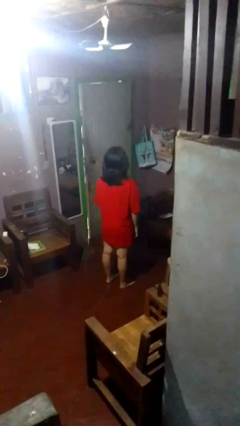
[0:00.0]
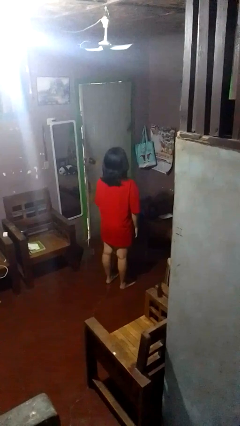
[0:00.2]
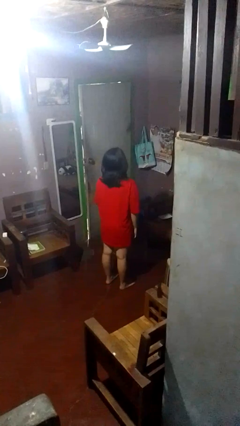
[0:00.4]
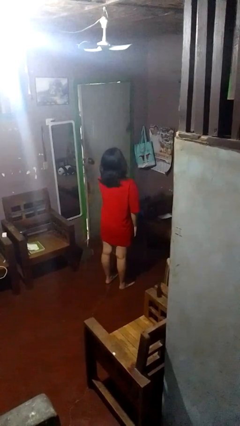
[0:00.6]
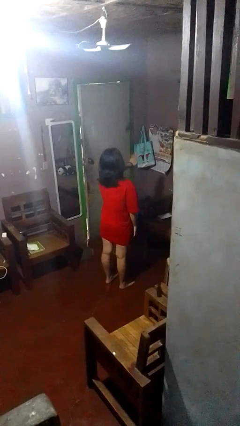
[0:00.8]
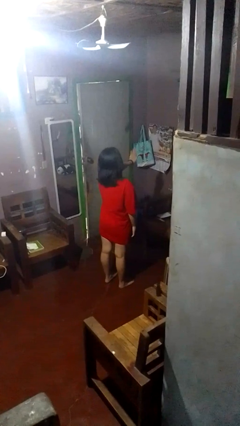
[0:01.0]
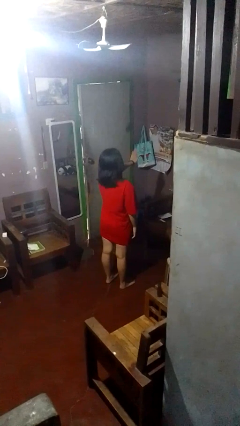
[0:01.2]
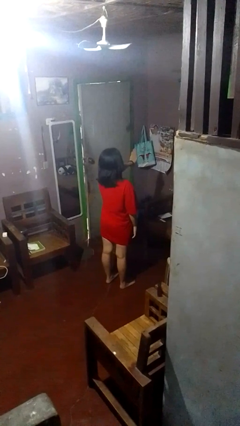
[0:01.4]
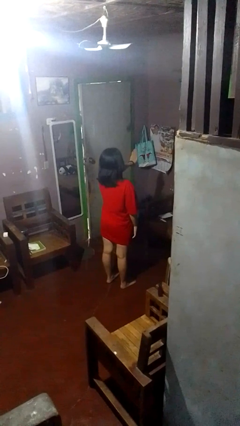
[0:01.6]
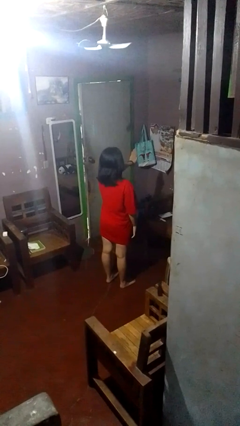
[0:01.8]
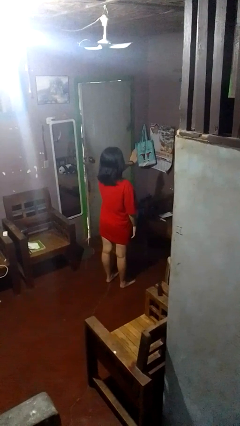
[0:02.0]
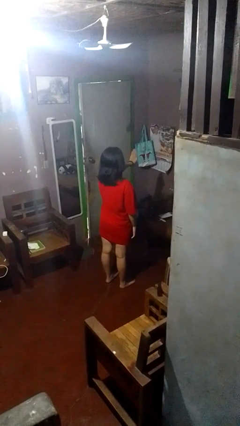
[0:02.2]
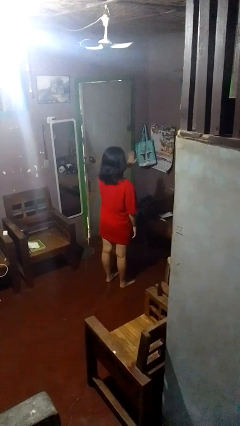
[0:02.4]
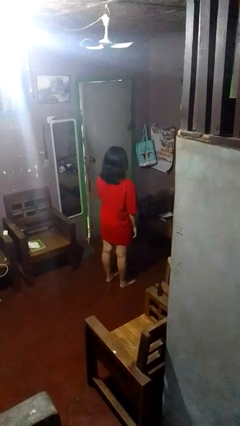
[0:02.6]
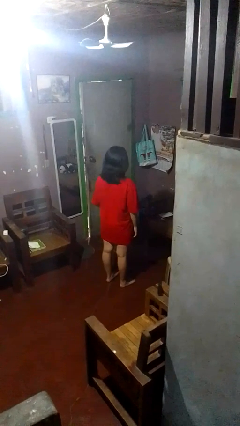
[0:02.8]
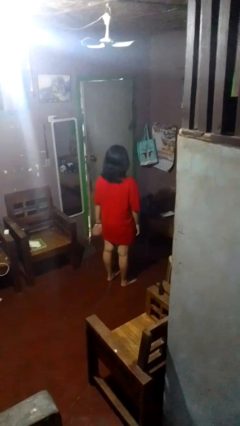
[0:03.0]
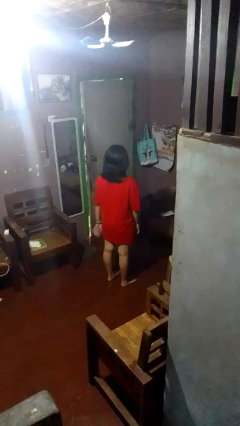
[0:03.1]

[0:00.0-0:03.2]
person gestures stop

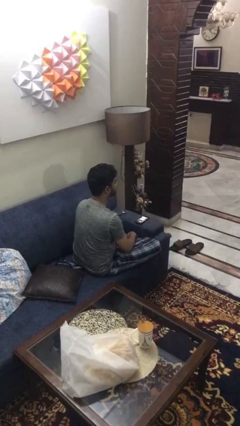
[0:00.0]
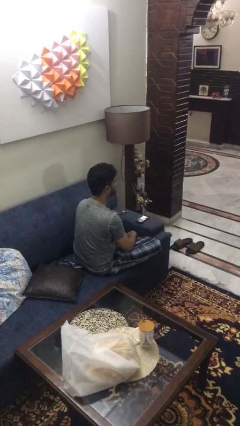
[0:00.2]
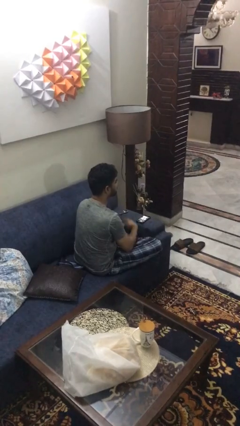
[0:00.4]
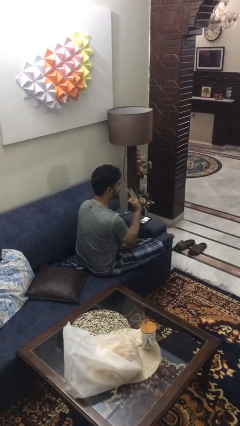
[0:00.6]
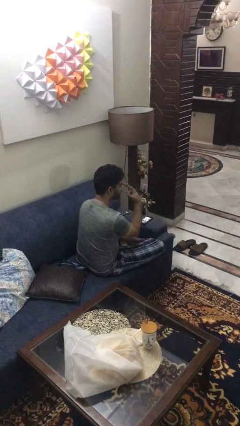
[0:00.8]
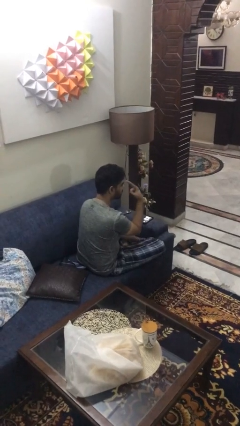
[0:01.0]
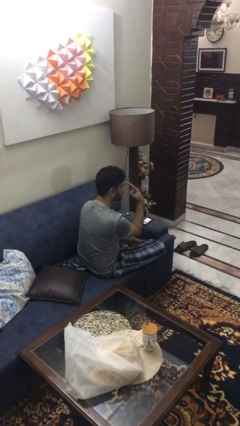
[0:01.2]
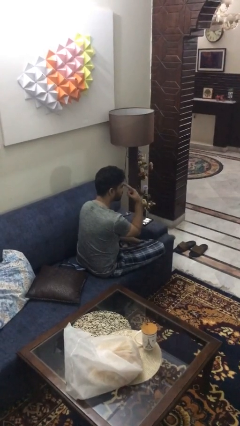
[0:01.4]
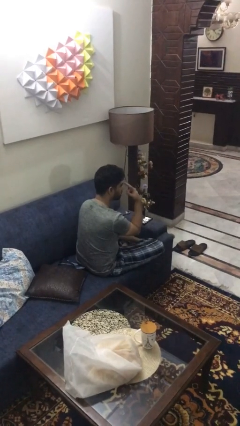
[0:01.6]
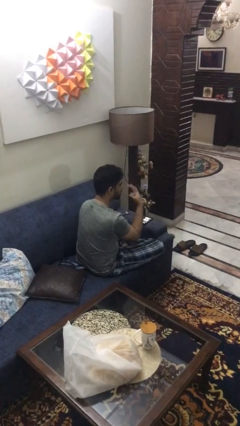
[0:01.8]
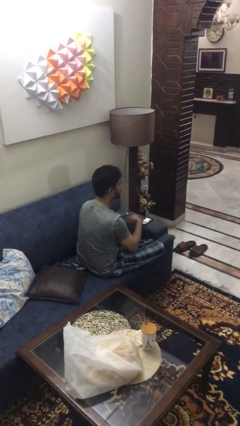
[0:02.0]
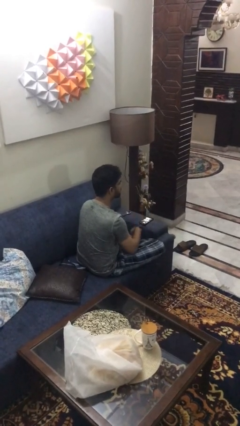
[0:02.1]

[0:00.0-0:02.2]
person gestures watch closely

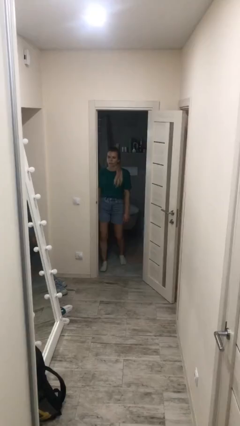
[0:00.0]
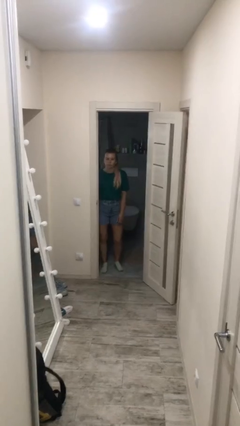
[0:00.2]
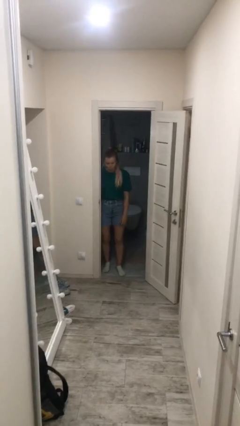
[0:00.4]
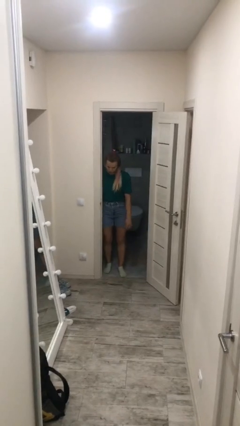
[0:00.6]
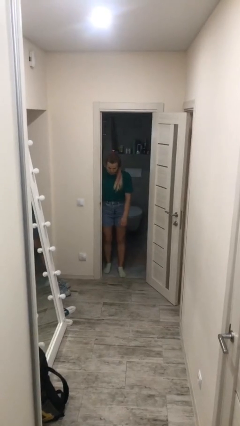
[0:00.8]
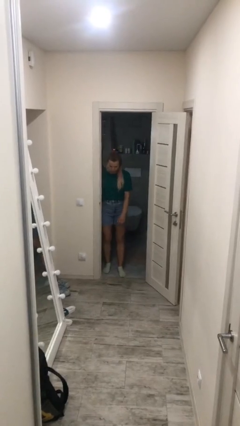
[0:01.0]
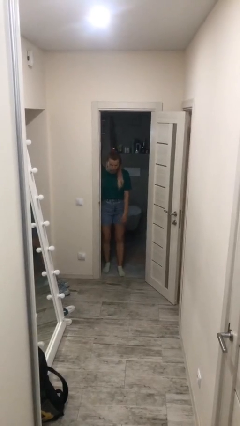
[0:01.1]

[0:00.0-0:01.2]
person bumps into wall

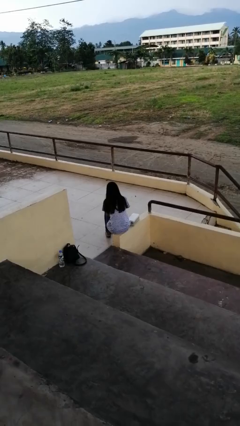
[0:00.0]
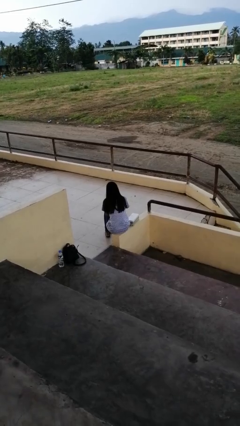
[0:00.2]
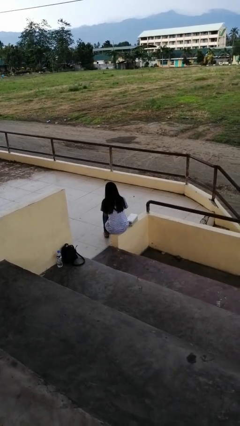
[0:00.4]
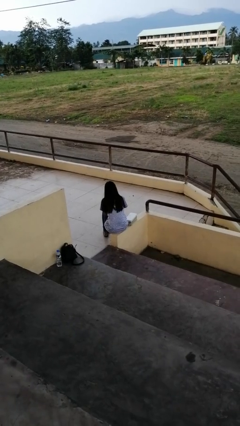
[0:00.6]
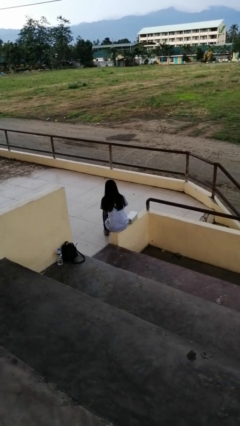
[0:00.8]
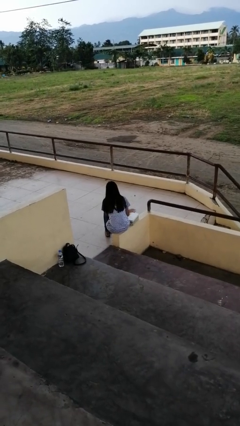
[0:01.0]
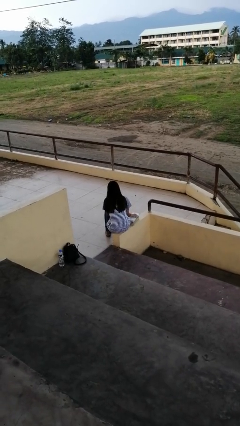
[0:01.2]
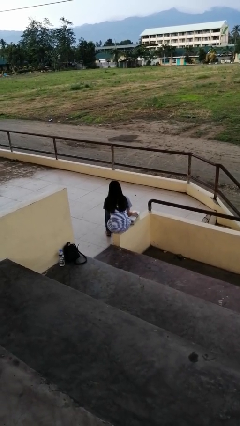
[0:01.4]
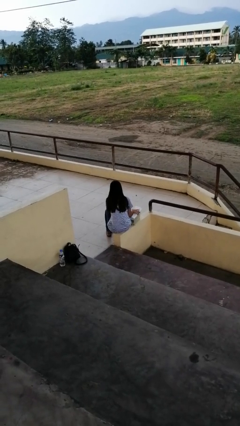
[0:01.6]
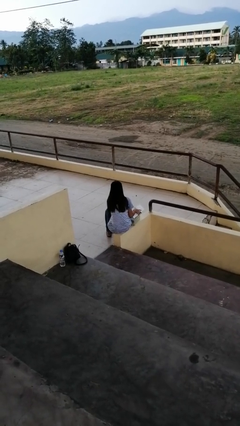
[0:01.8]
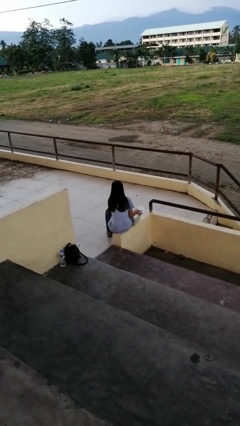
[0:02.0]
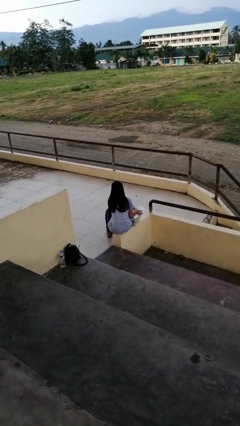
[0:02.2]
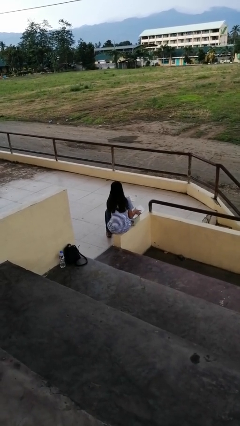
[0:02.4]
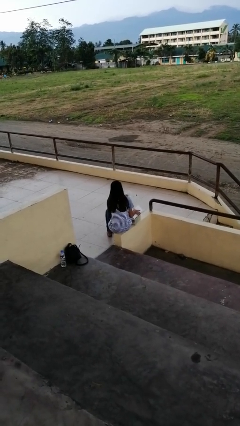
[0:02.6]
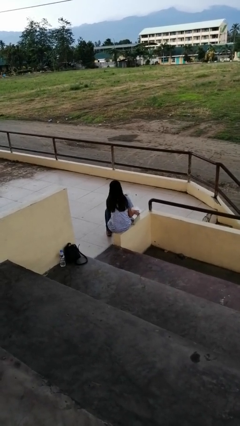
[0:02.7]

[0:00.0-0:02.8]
person takes object from box

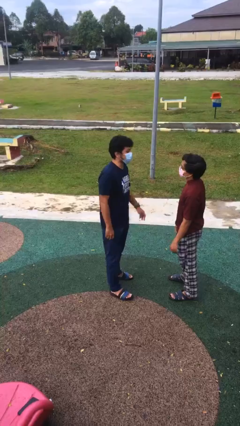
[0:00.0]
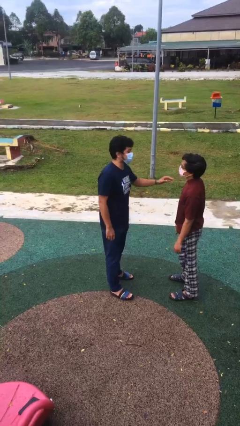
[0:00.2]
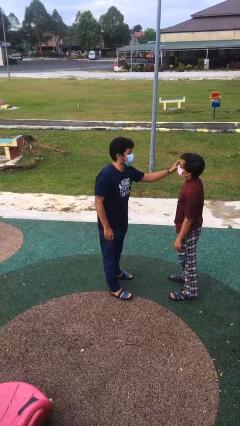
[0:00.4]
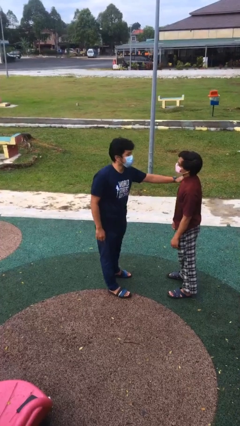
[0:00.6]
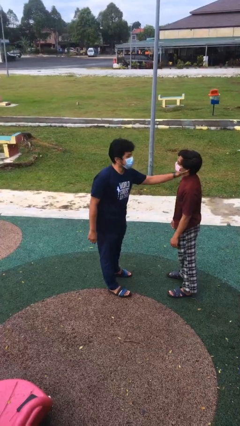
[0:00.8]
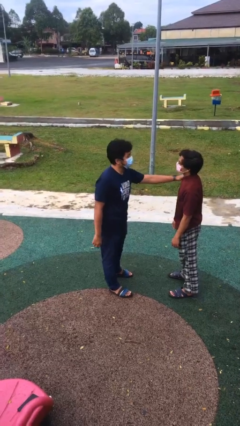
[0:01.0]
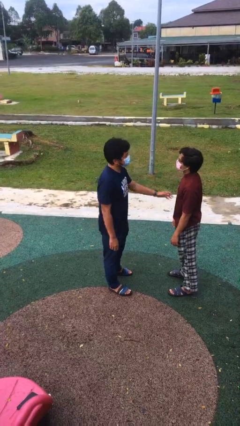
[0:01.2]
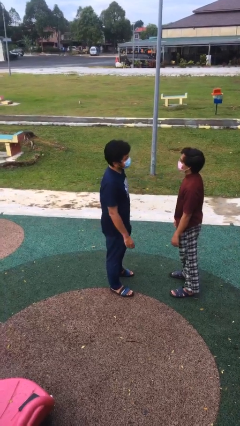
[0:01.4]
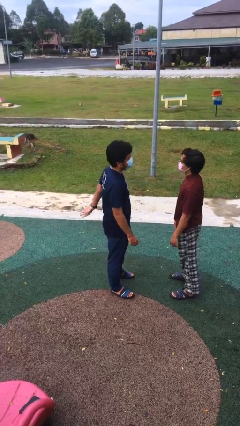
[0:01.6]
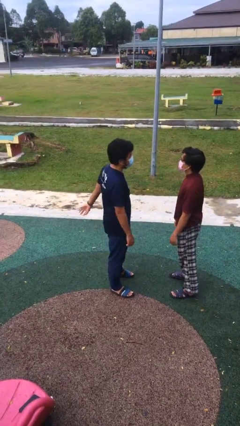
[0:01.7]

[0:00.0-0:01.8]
person pounds shoulders of person

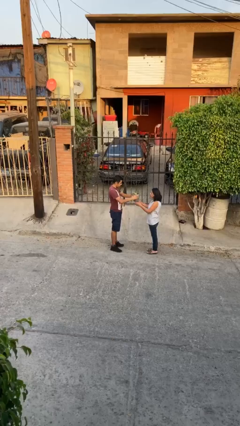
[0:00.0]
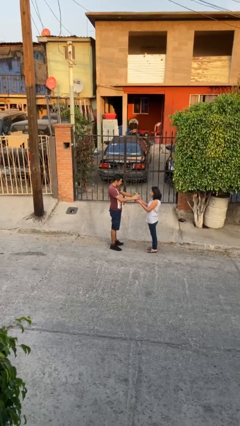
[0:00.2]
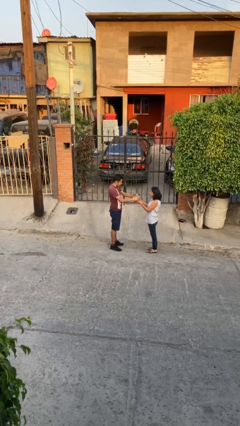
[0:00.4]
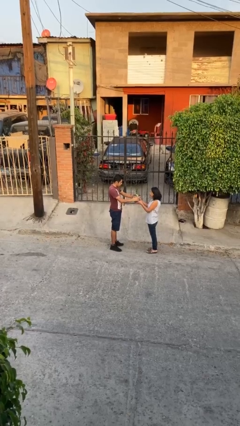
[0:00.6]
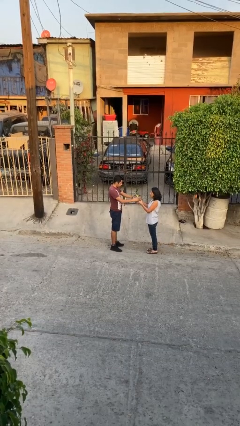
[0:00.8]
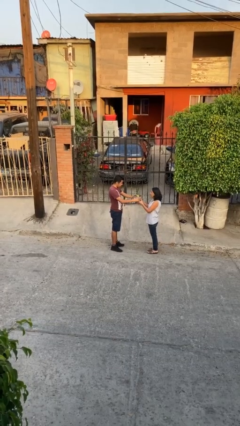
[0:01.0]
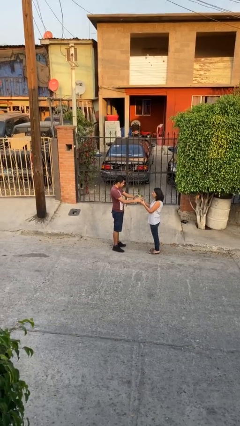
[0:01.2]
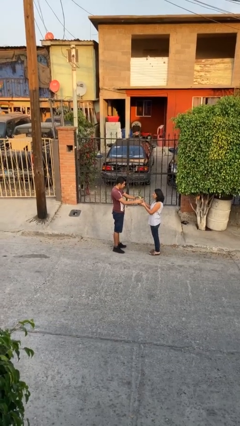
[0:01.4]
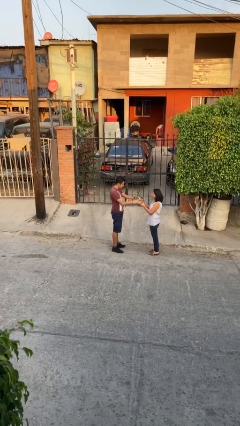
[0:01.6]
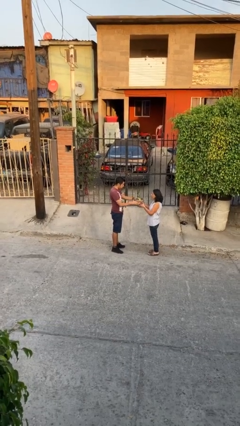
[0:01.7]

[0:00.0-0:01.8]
person transfers object to person

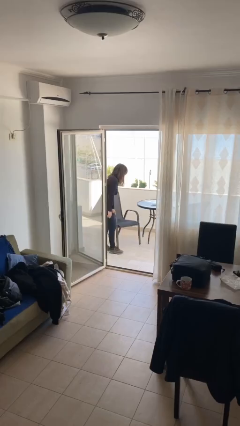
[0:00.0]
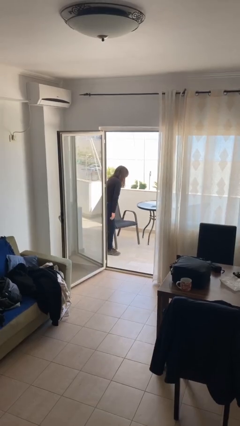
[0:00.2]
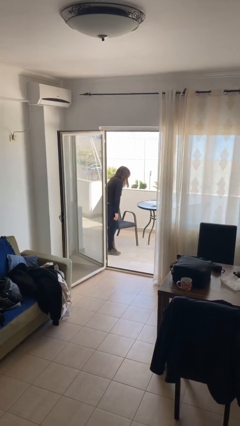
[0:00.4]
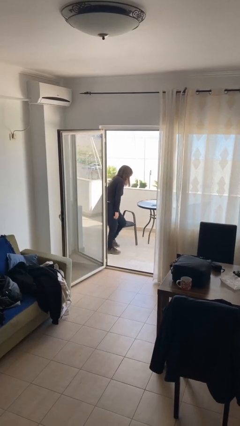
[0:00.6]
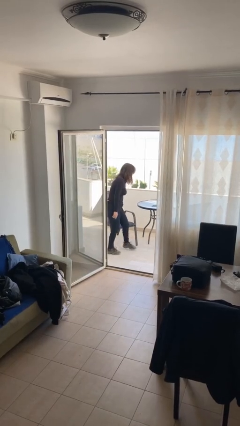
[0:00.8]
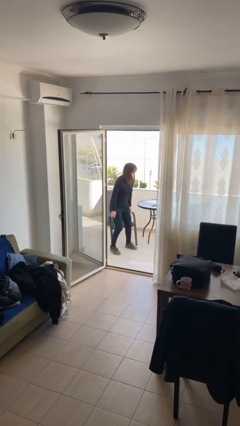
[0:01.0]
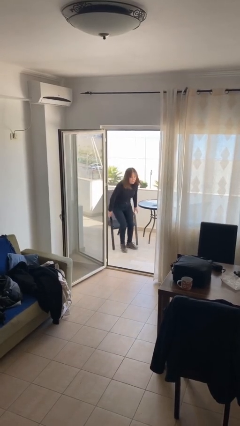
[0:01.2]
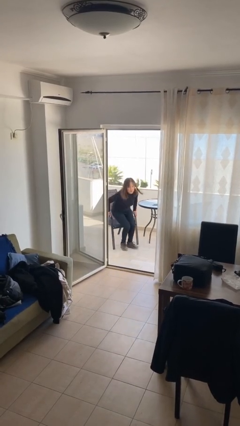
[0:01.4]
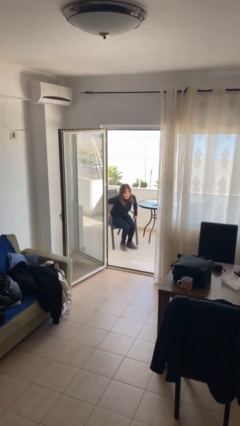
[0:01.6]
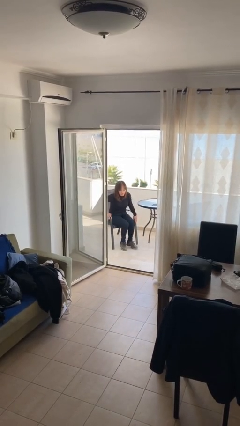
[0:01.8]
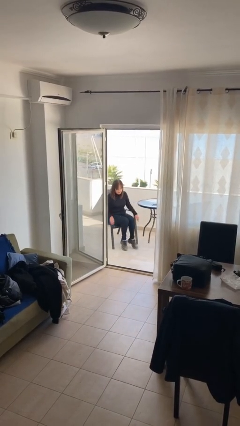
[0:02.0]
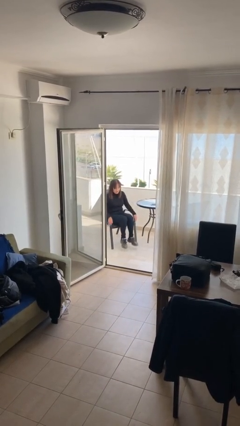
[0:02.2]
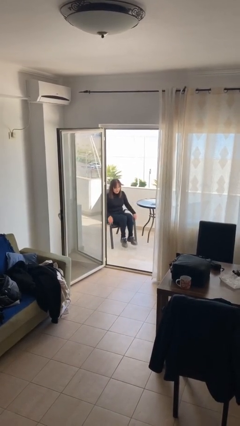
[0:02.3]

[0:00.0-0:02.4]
person sits down

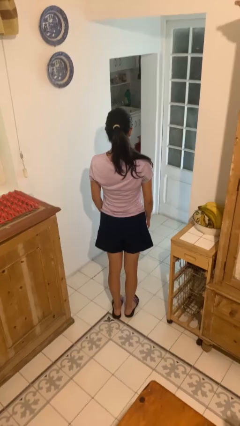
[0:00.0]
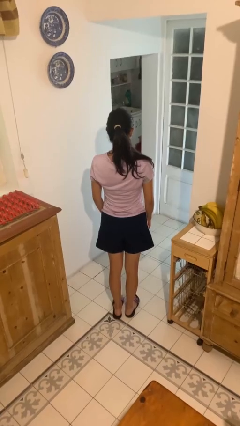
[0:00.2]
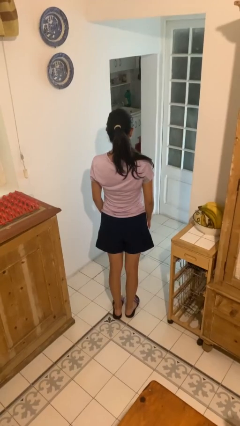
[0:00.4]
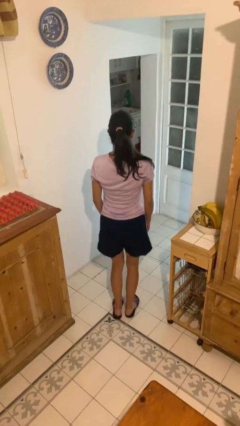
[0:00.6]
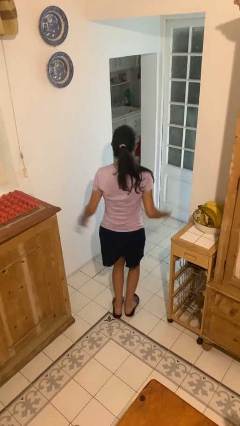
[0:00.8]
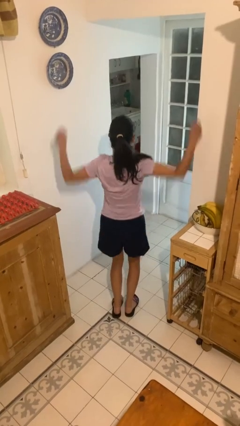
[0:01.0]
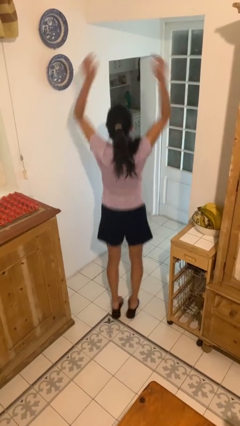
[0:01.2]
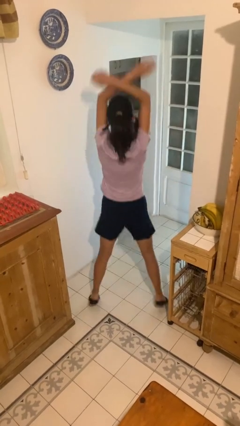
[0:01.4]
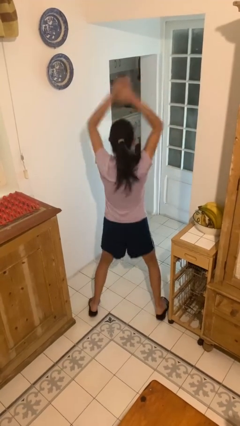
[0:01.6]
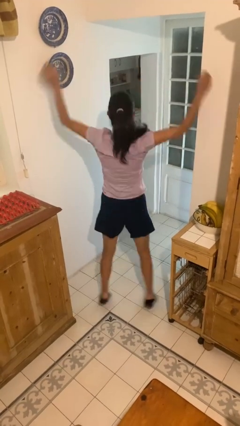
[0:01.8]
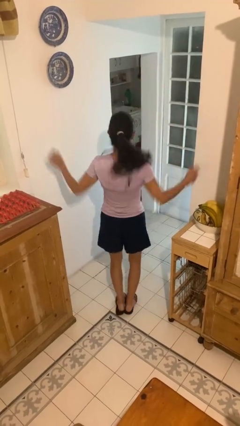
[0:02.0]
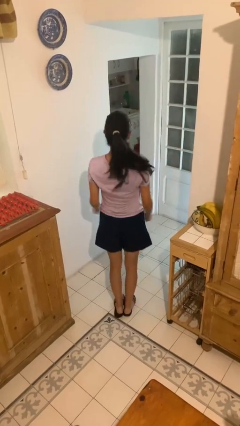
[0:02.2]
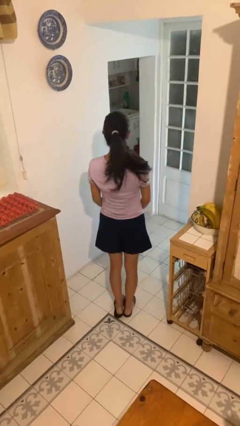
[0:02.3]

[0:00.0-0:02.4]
person exercises with jumping jacks
